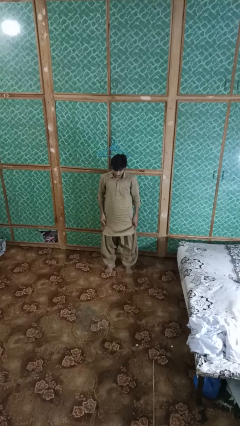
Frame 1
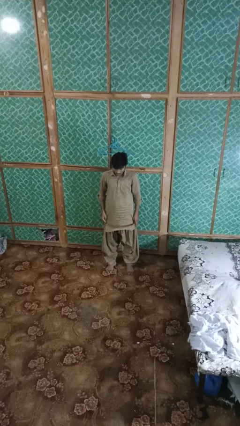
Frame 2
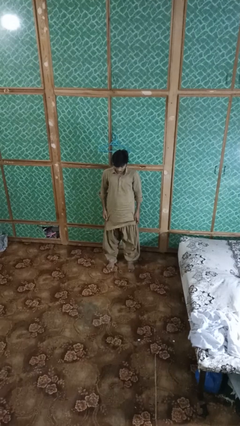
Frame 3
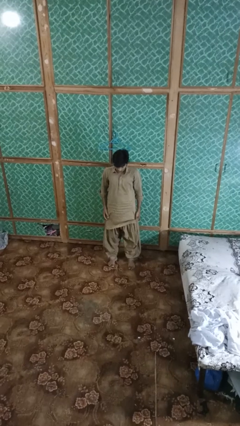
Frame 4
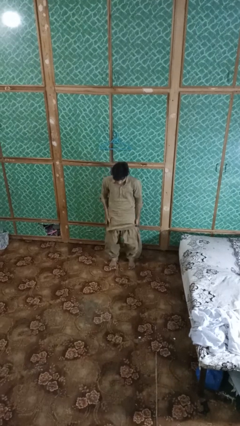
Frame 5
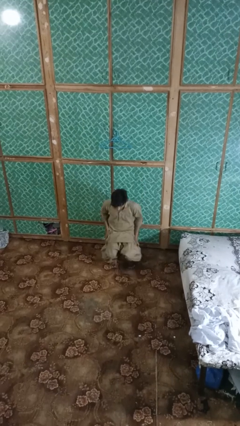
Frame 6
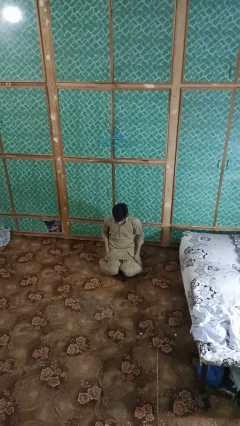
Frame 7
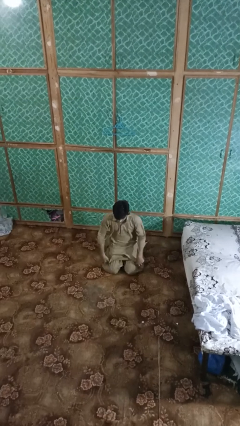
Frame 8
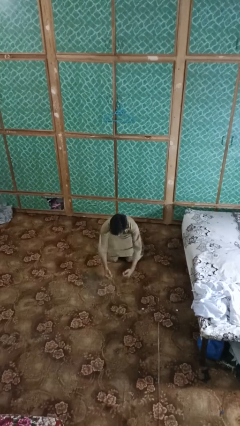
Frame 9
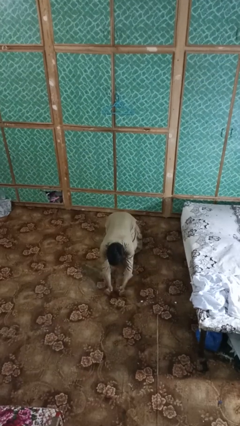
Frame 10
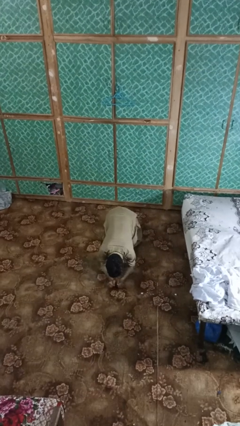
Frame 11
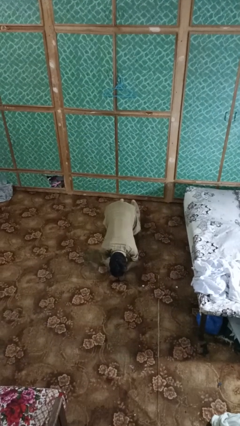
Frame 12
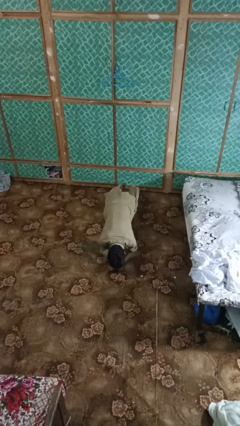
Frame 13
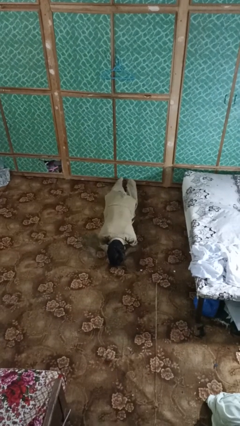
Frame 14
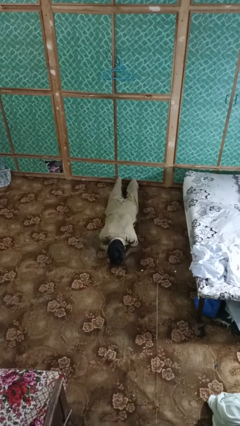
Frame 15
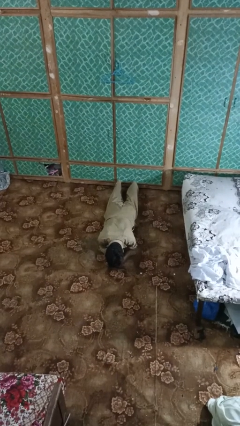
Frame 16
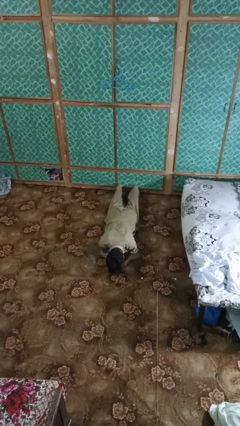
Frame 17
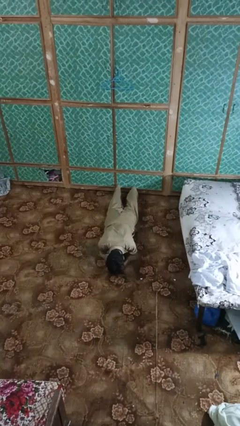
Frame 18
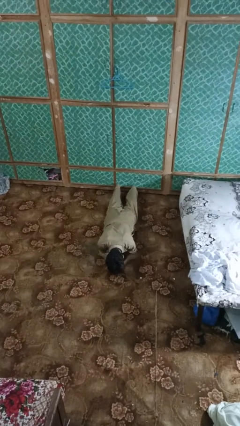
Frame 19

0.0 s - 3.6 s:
person exercises with plank

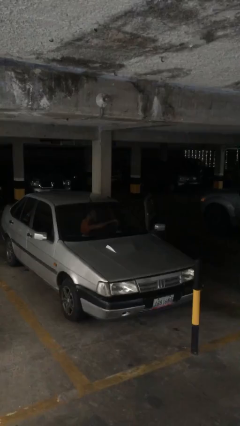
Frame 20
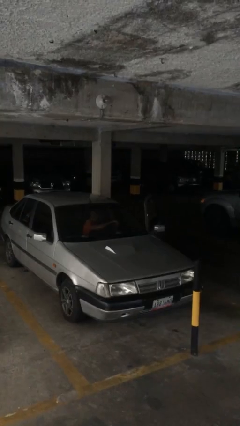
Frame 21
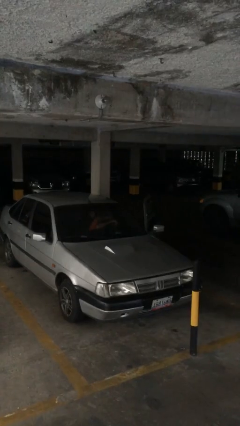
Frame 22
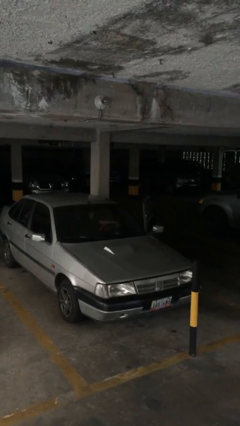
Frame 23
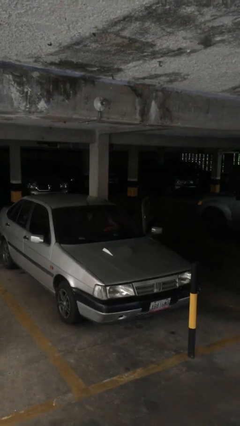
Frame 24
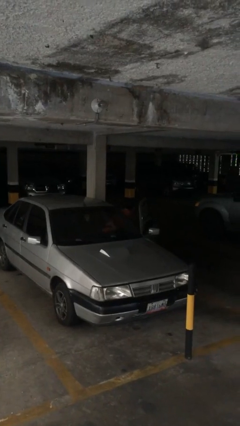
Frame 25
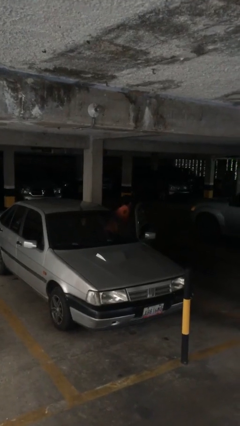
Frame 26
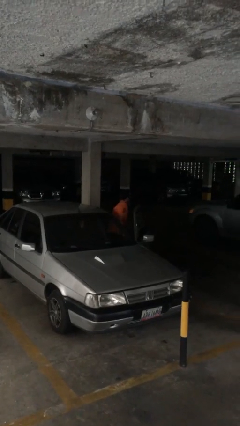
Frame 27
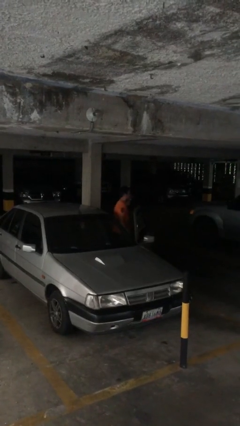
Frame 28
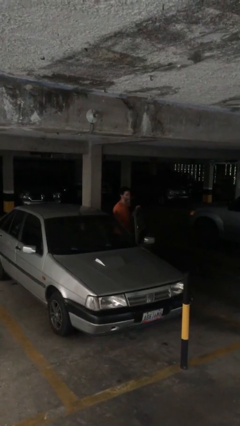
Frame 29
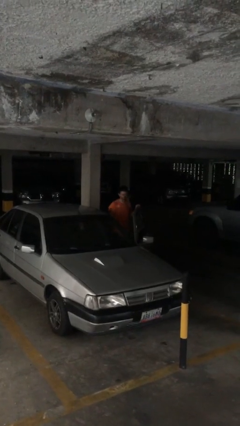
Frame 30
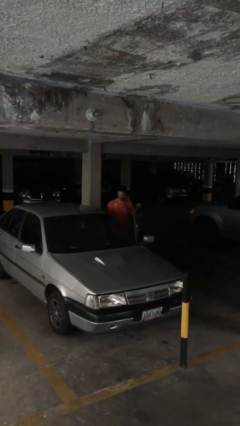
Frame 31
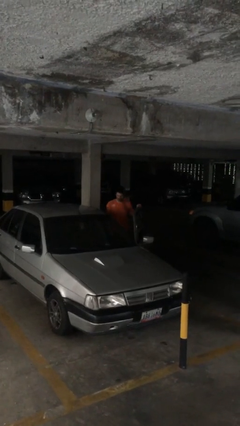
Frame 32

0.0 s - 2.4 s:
person exits car

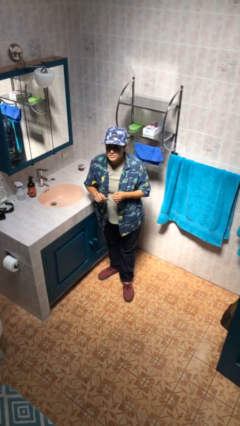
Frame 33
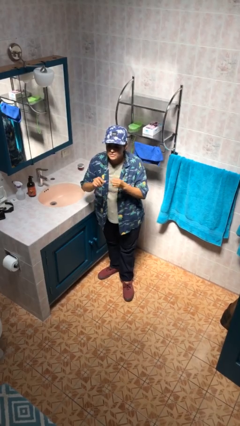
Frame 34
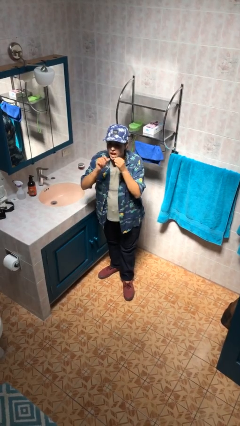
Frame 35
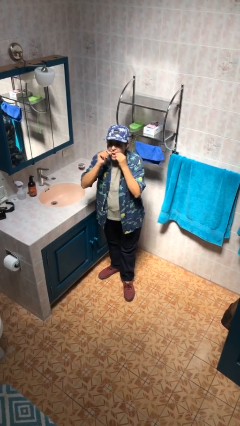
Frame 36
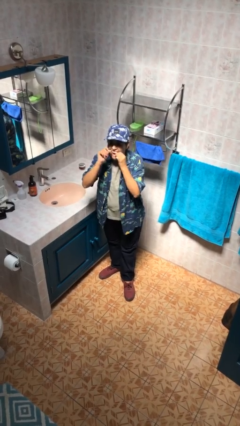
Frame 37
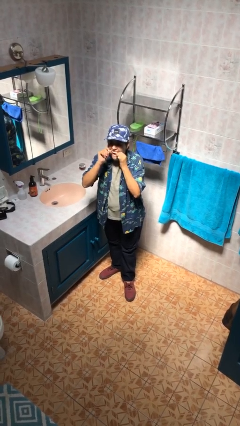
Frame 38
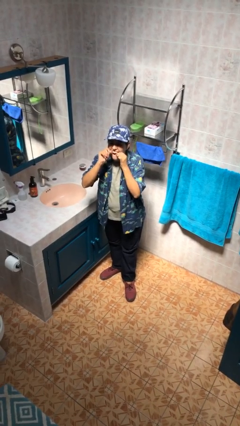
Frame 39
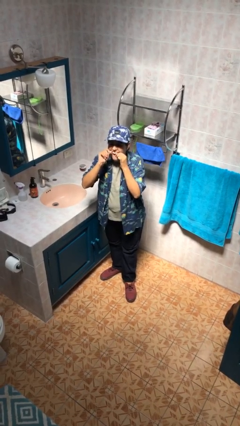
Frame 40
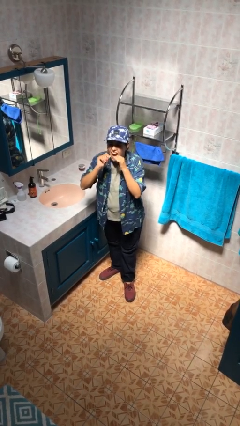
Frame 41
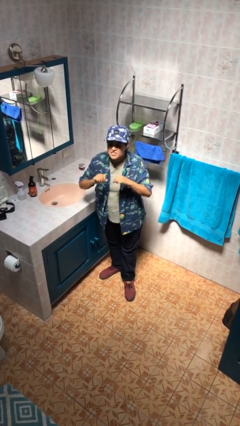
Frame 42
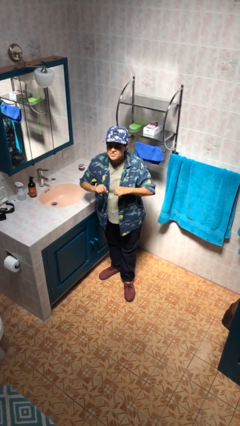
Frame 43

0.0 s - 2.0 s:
person flosses

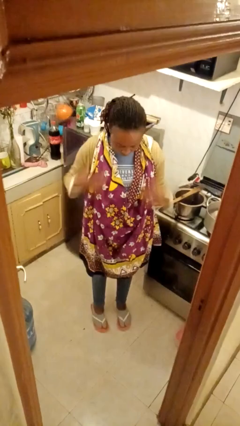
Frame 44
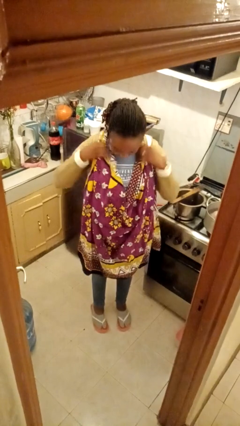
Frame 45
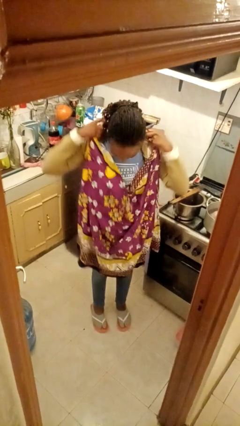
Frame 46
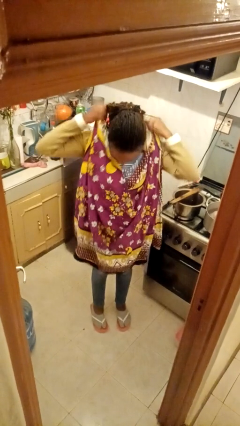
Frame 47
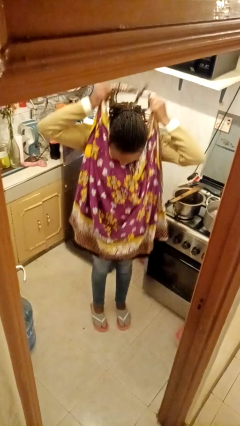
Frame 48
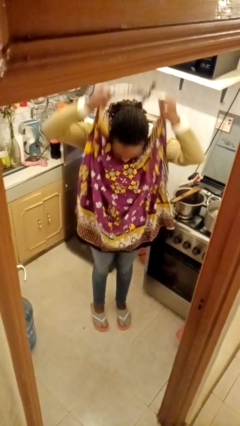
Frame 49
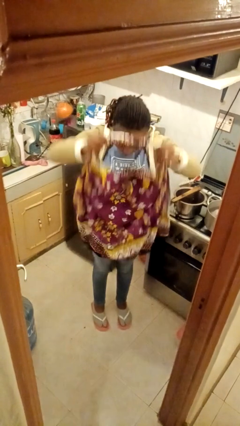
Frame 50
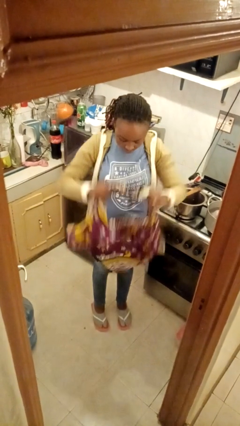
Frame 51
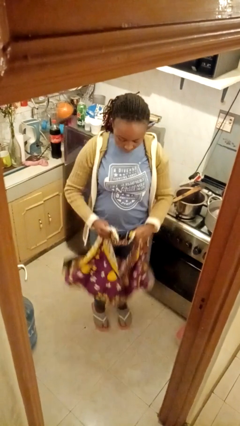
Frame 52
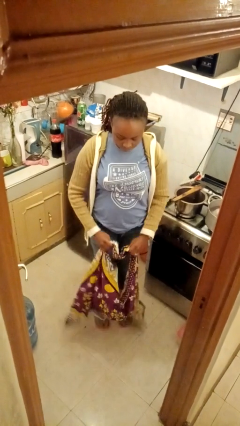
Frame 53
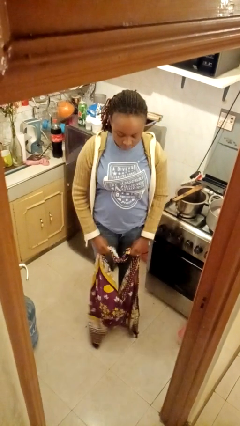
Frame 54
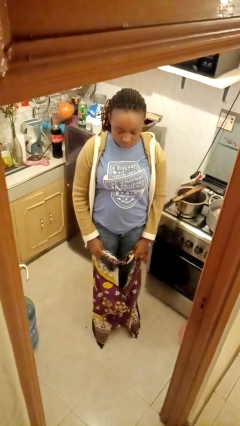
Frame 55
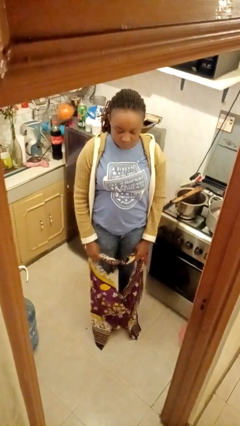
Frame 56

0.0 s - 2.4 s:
person takes off apron

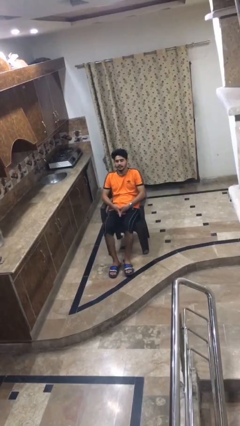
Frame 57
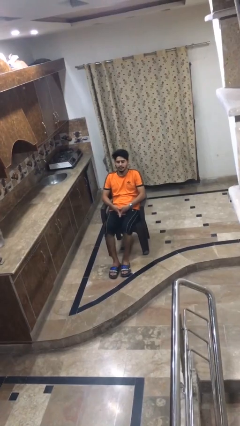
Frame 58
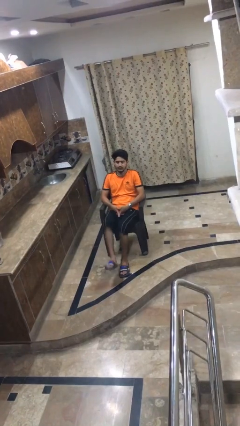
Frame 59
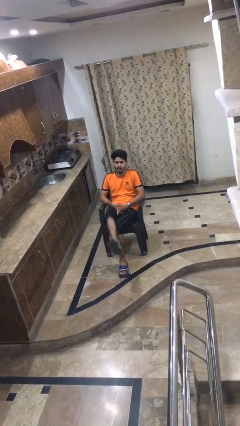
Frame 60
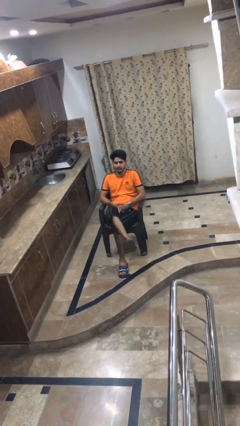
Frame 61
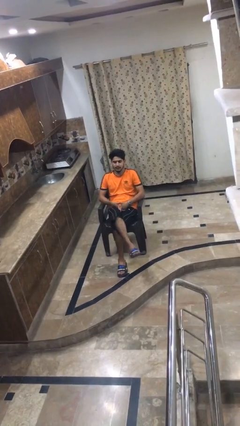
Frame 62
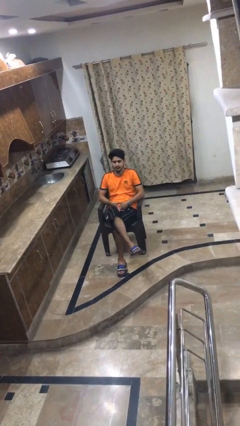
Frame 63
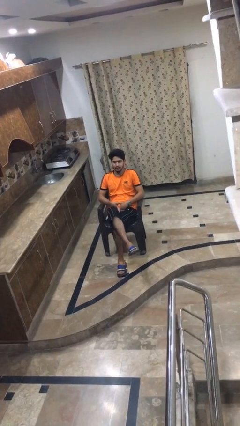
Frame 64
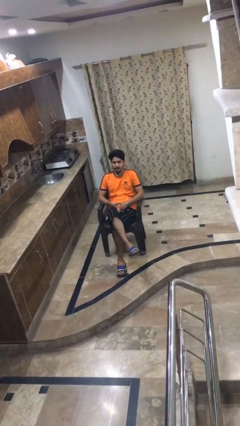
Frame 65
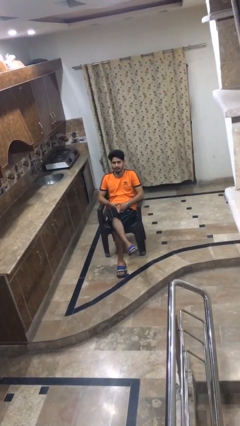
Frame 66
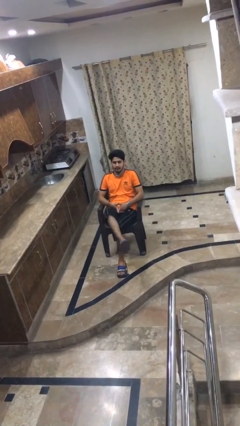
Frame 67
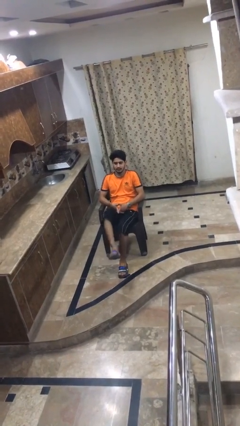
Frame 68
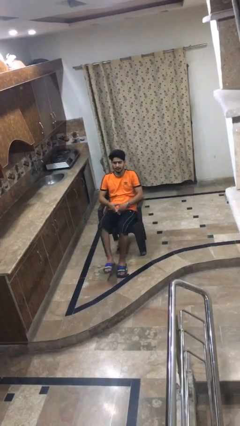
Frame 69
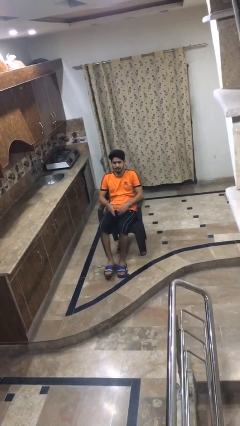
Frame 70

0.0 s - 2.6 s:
person crosses legs

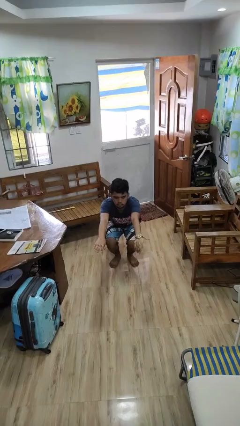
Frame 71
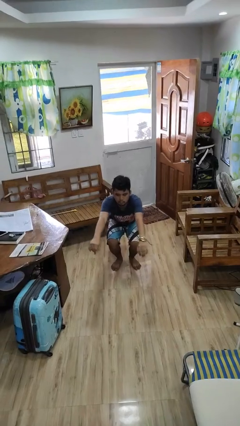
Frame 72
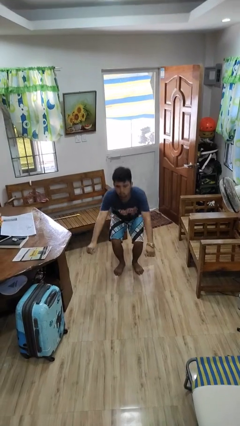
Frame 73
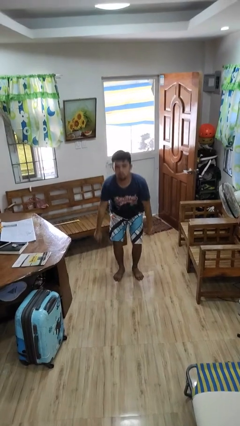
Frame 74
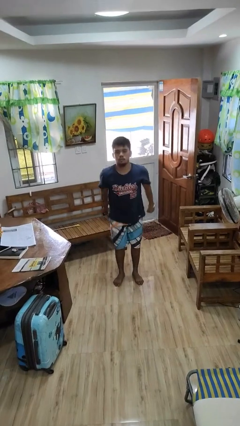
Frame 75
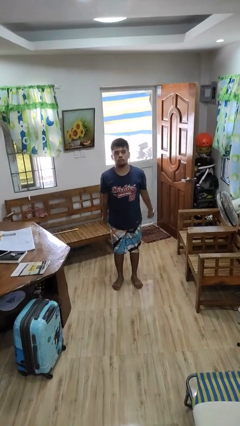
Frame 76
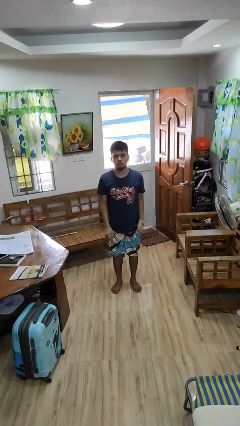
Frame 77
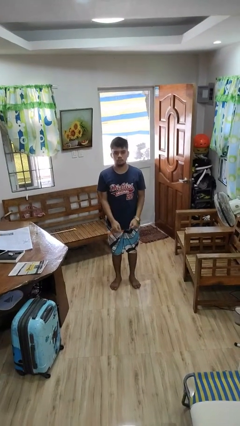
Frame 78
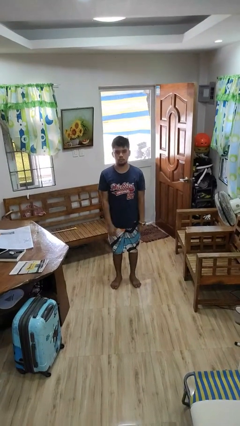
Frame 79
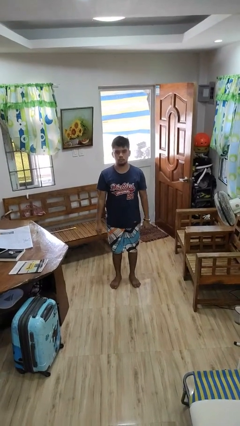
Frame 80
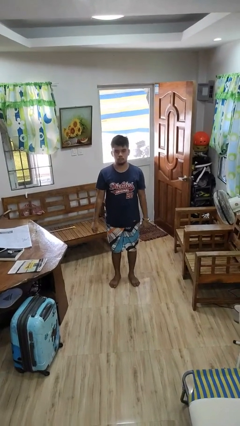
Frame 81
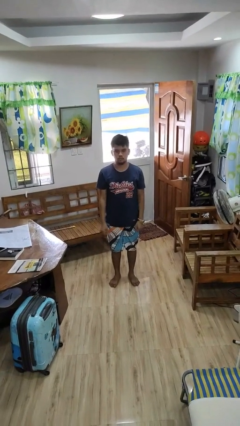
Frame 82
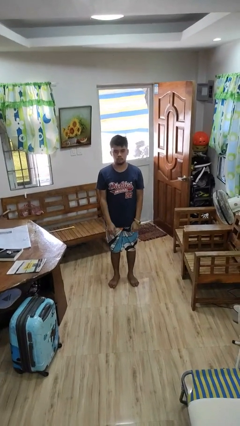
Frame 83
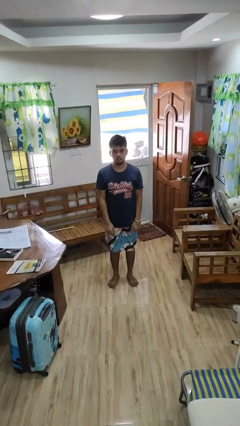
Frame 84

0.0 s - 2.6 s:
person stands up

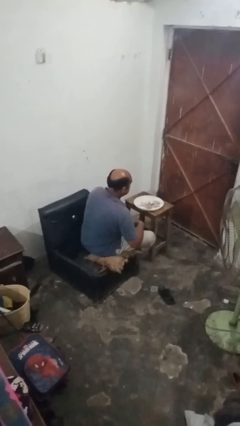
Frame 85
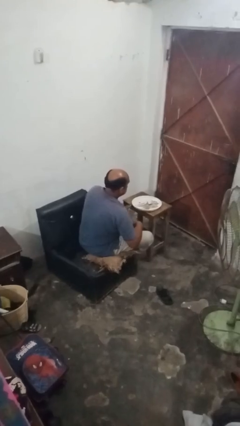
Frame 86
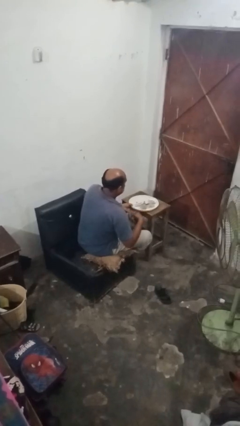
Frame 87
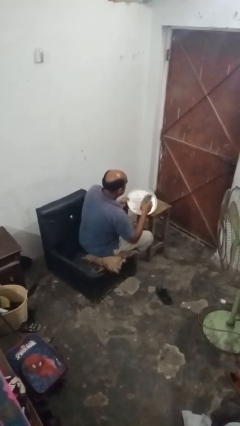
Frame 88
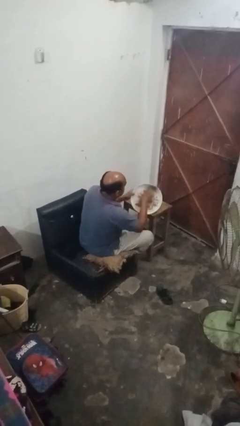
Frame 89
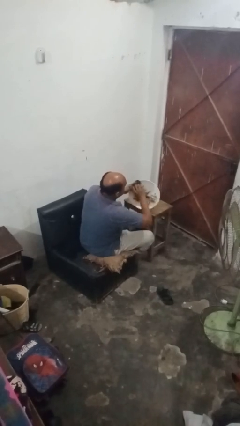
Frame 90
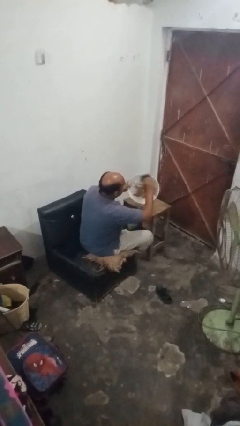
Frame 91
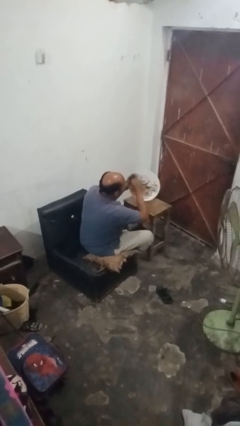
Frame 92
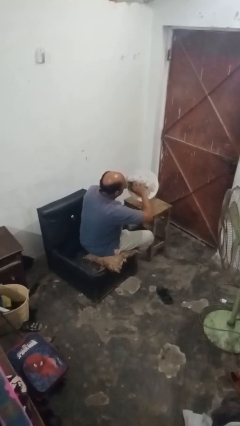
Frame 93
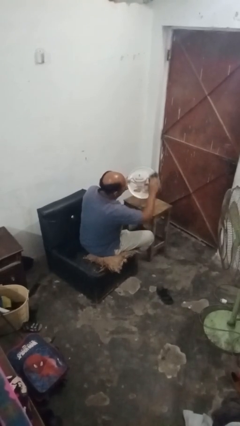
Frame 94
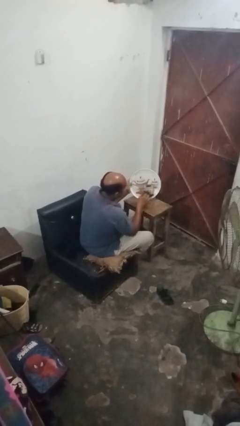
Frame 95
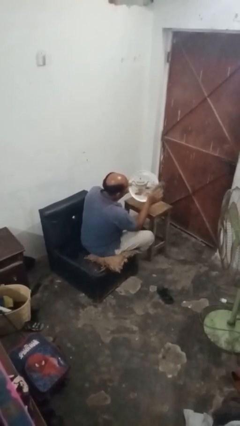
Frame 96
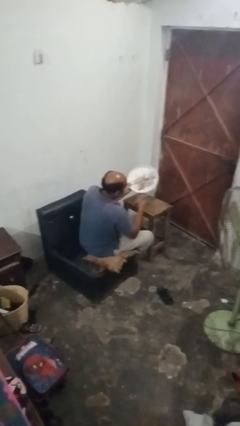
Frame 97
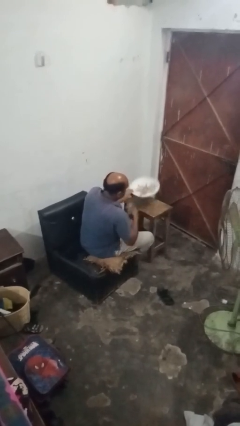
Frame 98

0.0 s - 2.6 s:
person dries dish
